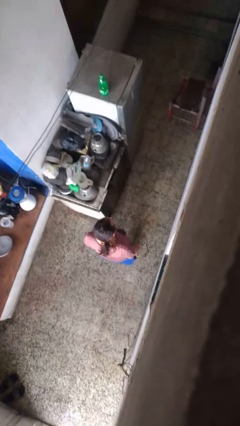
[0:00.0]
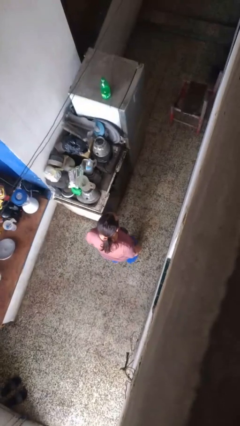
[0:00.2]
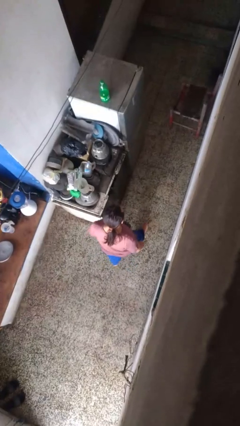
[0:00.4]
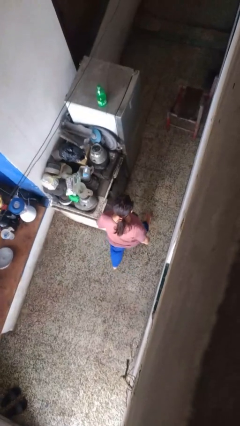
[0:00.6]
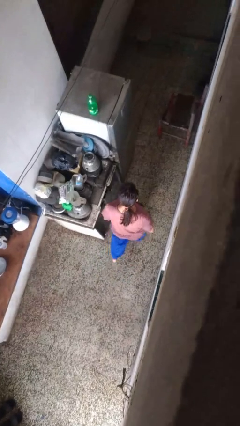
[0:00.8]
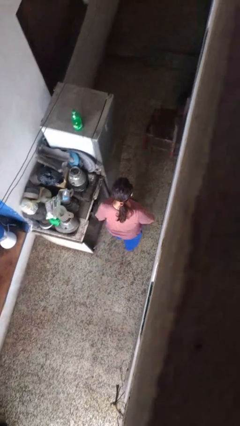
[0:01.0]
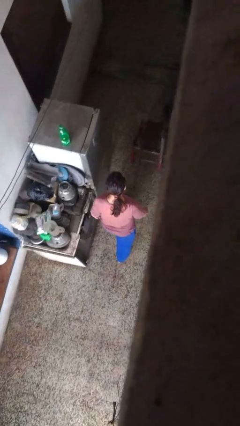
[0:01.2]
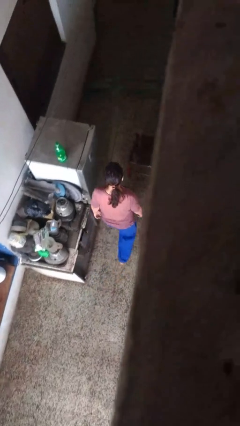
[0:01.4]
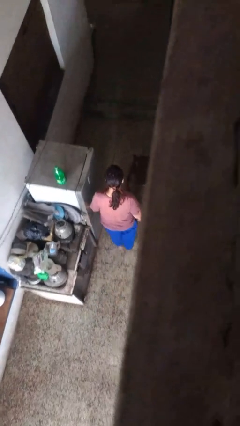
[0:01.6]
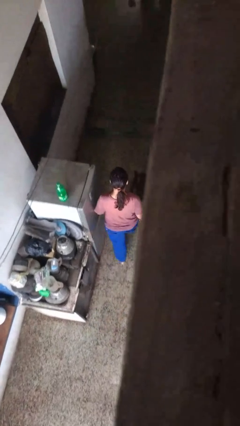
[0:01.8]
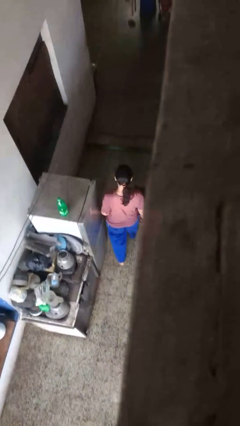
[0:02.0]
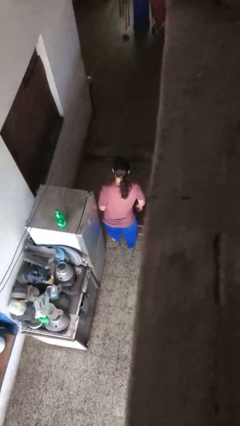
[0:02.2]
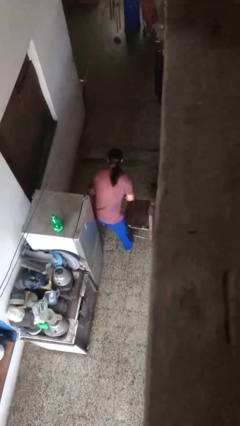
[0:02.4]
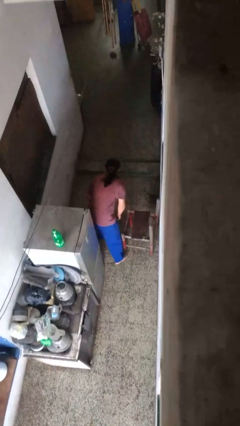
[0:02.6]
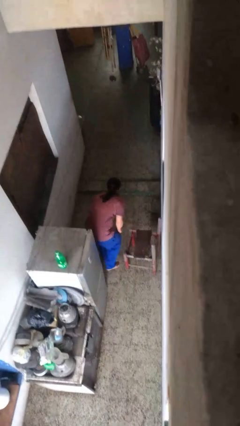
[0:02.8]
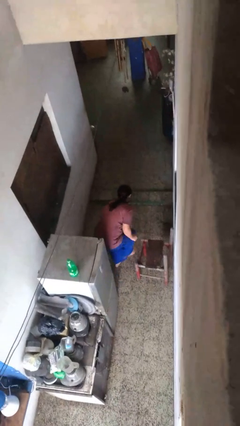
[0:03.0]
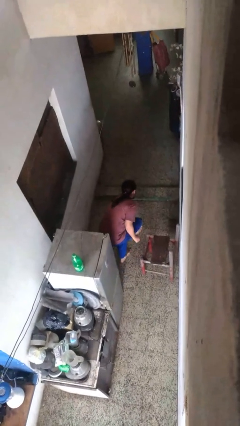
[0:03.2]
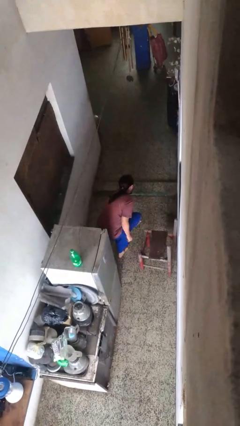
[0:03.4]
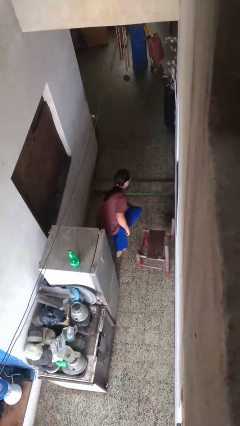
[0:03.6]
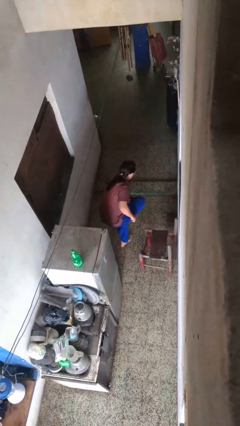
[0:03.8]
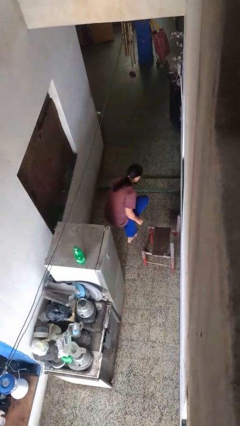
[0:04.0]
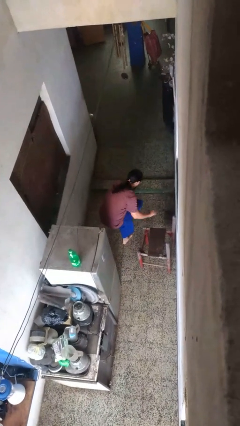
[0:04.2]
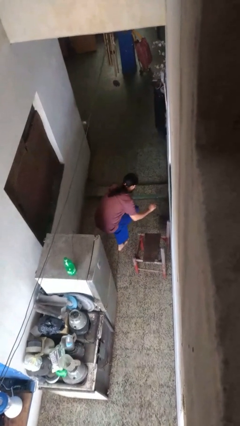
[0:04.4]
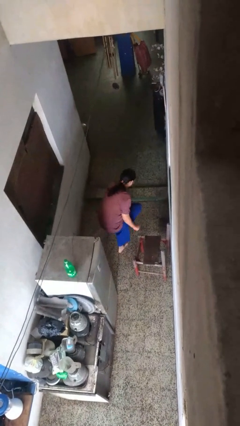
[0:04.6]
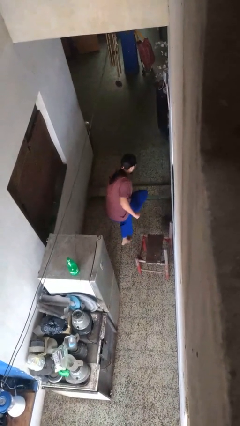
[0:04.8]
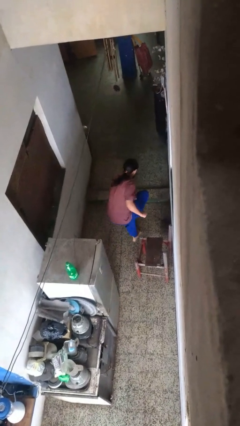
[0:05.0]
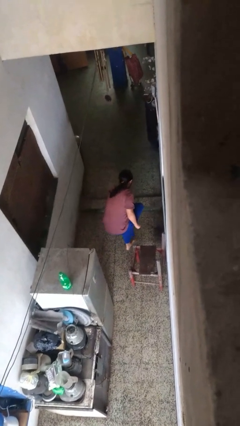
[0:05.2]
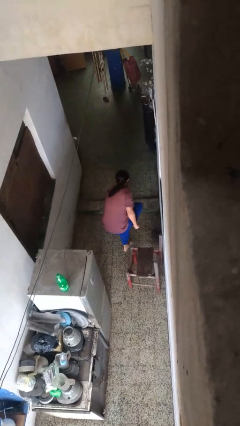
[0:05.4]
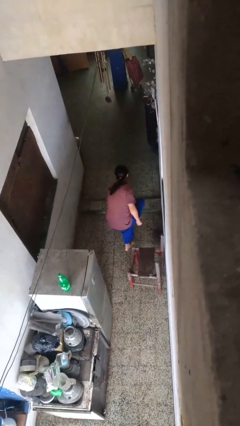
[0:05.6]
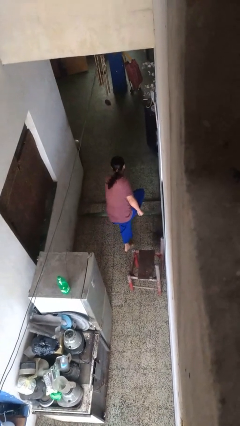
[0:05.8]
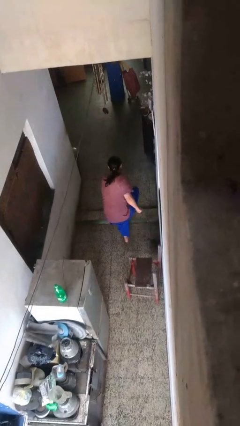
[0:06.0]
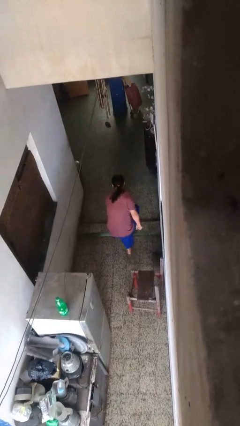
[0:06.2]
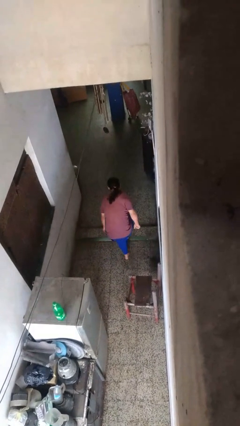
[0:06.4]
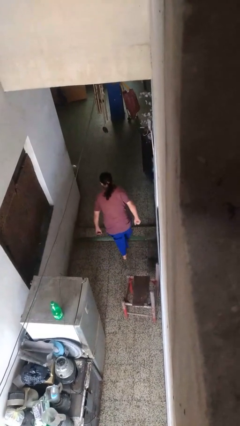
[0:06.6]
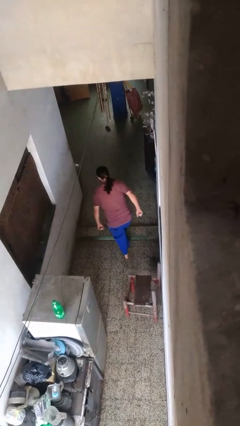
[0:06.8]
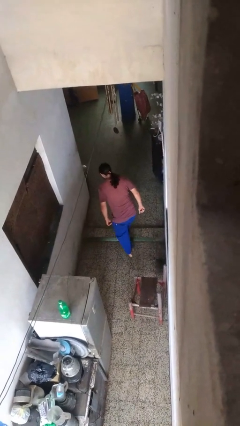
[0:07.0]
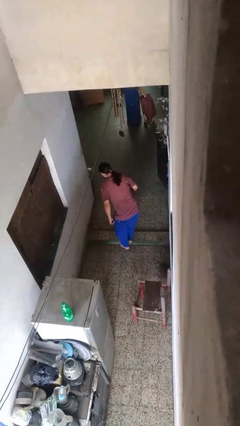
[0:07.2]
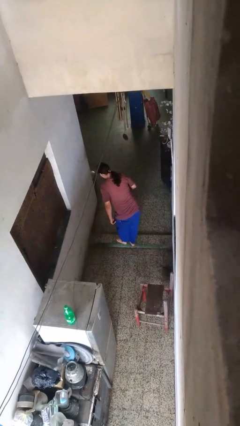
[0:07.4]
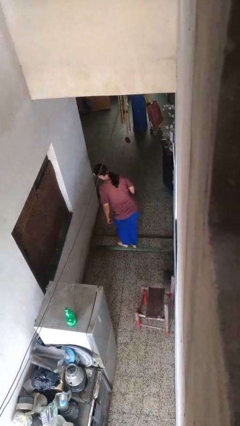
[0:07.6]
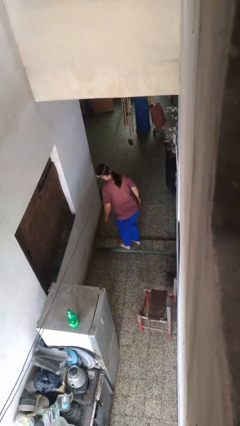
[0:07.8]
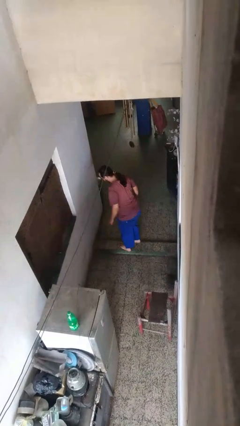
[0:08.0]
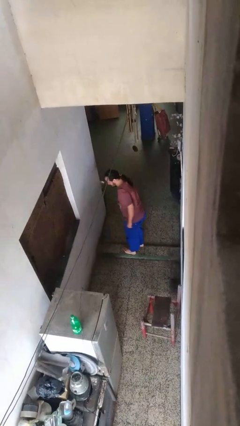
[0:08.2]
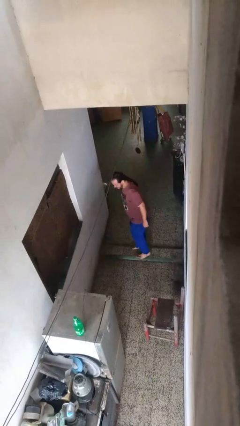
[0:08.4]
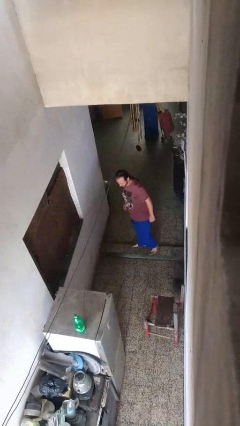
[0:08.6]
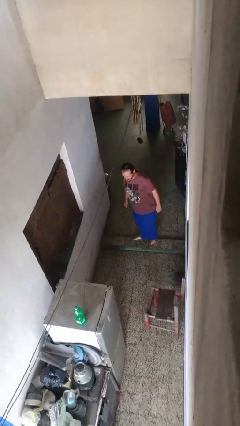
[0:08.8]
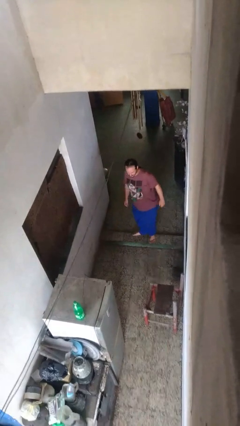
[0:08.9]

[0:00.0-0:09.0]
person stubs toe

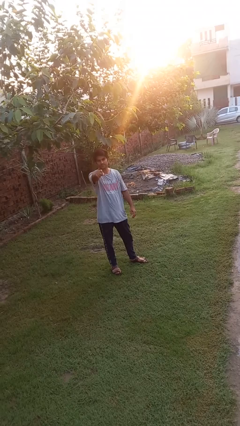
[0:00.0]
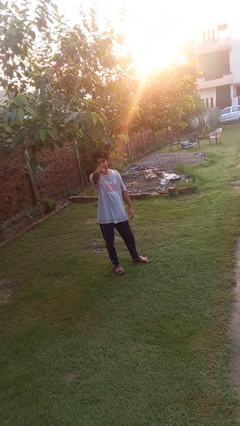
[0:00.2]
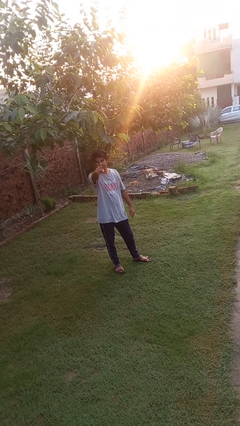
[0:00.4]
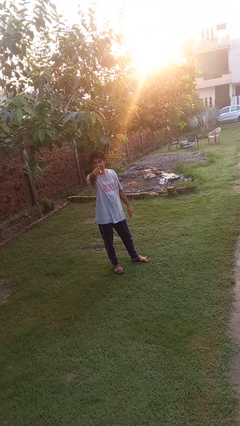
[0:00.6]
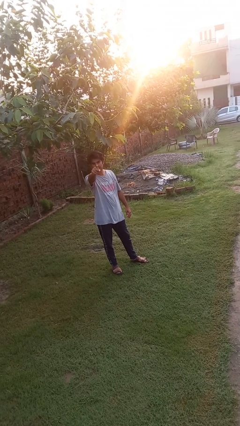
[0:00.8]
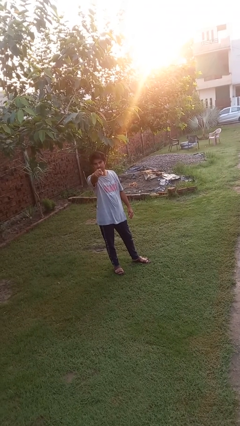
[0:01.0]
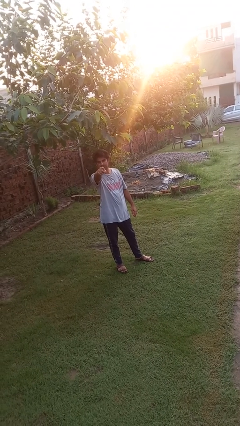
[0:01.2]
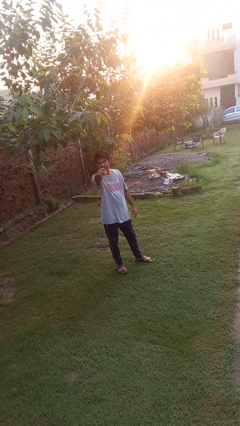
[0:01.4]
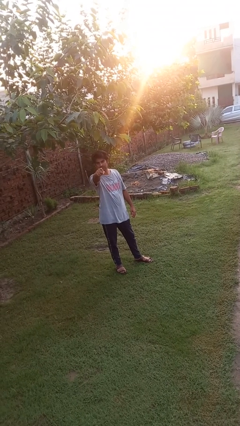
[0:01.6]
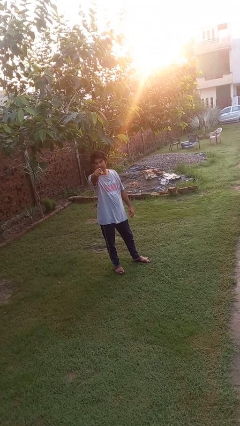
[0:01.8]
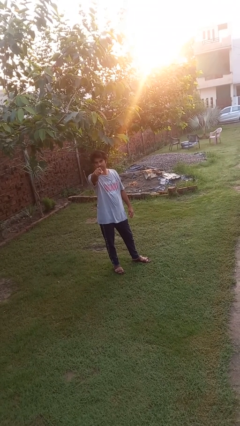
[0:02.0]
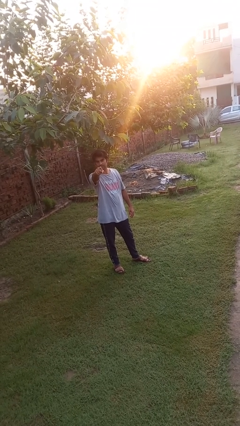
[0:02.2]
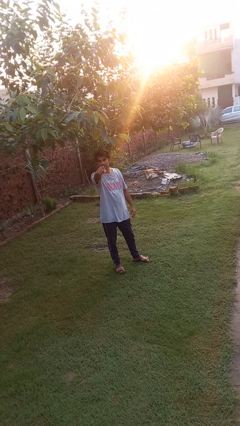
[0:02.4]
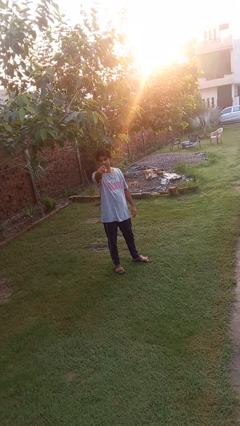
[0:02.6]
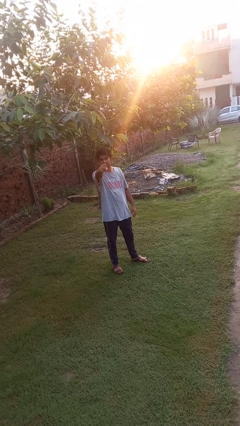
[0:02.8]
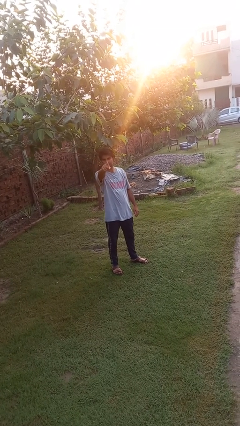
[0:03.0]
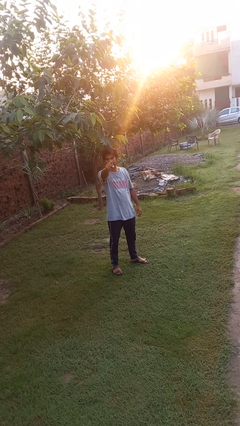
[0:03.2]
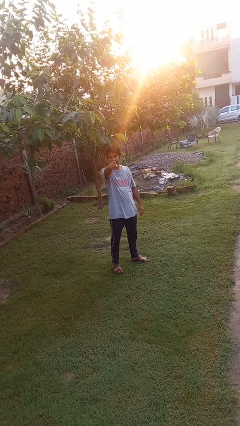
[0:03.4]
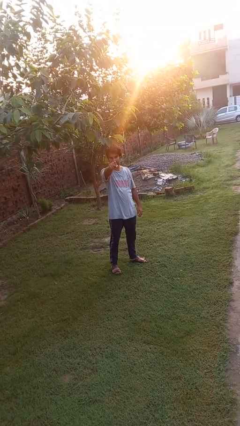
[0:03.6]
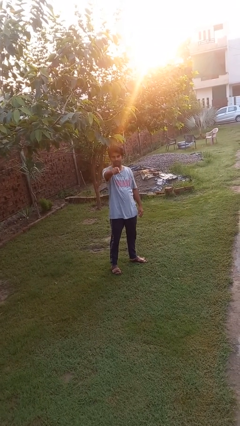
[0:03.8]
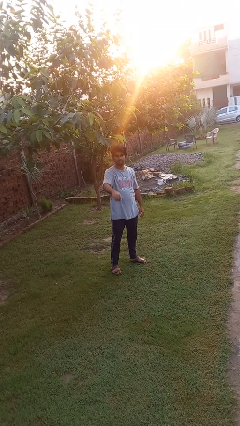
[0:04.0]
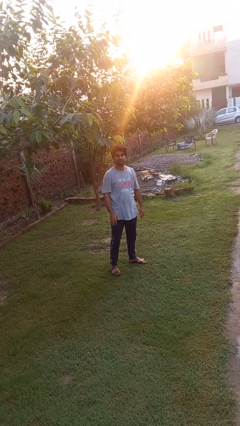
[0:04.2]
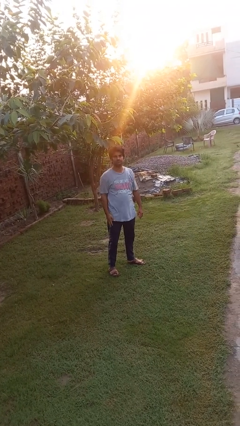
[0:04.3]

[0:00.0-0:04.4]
person points at person

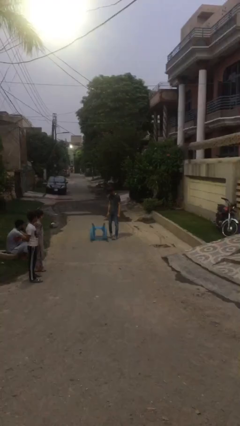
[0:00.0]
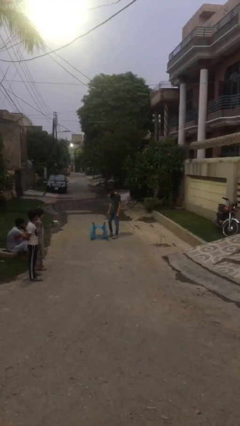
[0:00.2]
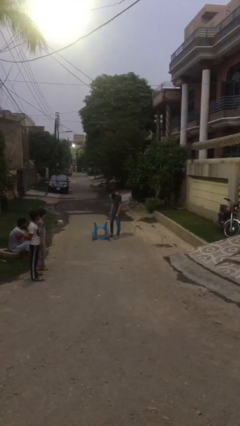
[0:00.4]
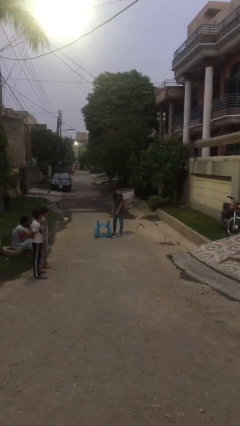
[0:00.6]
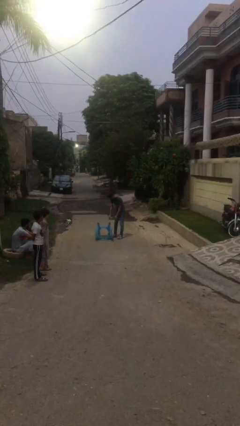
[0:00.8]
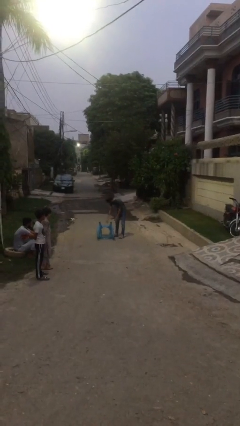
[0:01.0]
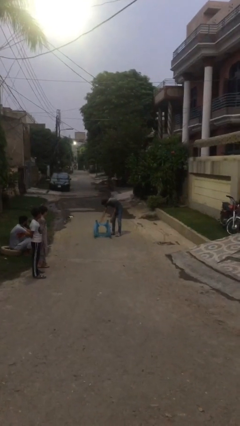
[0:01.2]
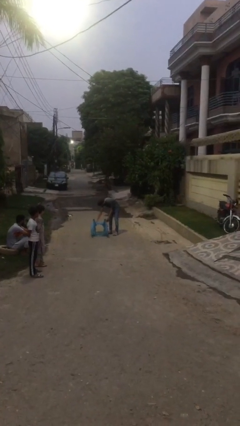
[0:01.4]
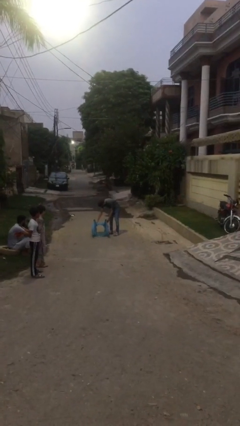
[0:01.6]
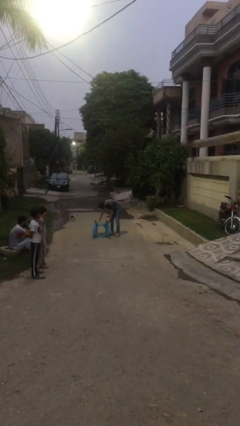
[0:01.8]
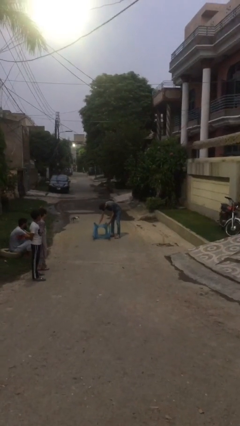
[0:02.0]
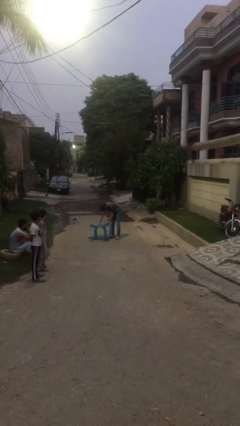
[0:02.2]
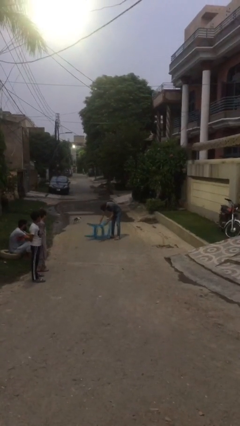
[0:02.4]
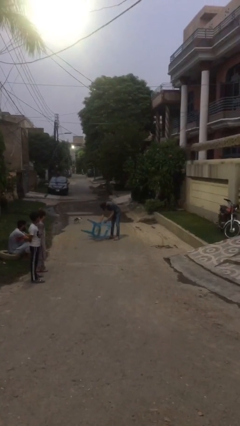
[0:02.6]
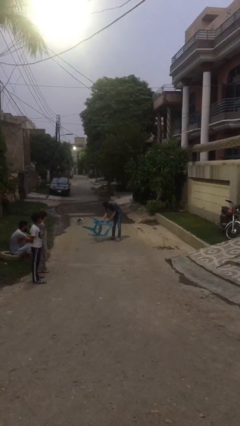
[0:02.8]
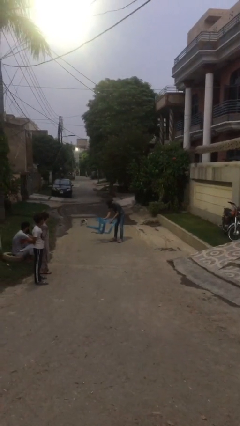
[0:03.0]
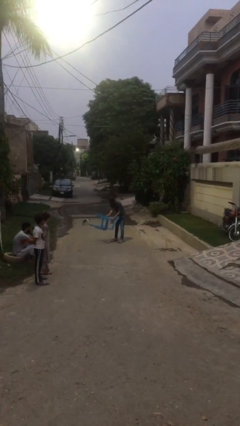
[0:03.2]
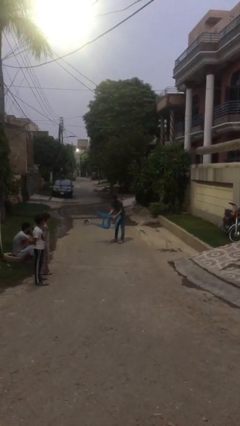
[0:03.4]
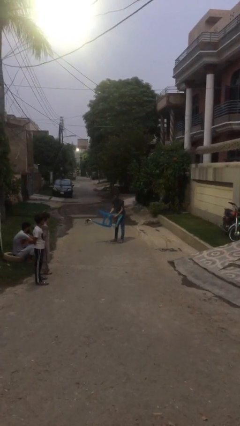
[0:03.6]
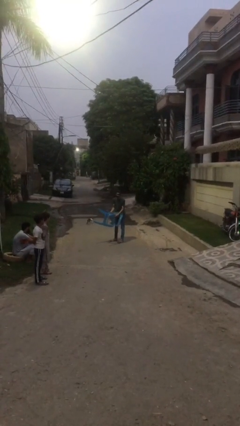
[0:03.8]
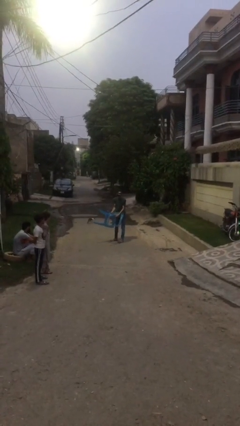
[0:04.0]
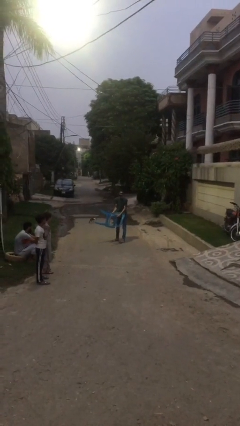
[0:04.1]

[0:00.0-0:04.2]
person picks up object from floor
